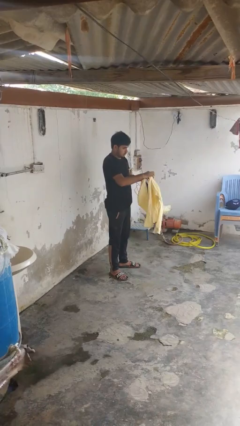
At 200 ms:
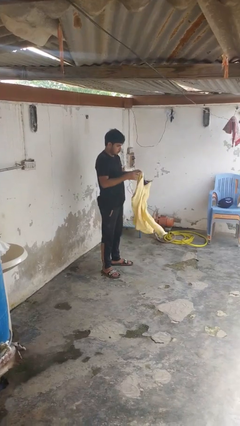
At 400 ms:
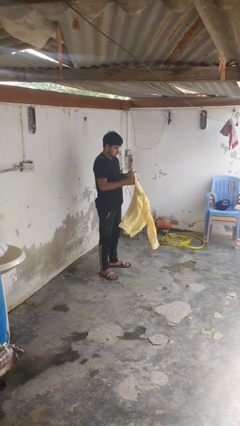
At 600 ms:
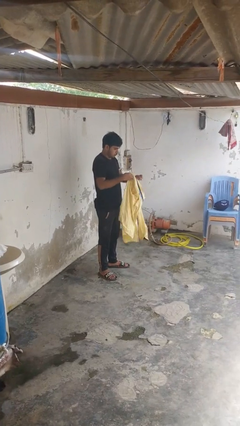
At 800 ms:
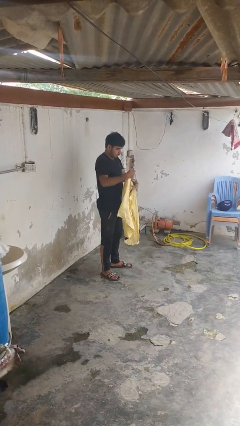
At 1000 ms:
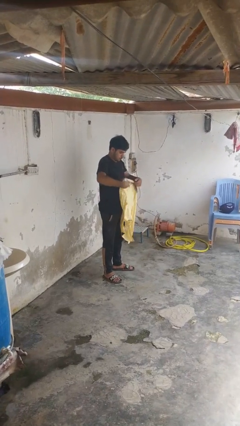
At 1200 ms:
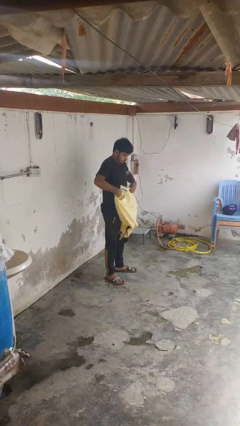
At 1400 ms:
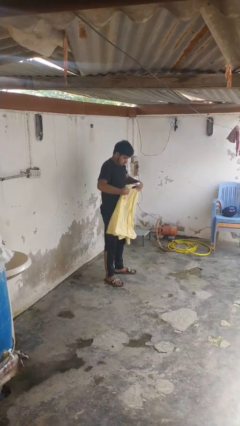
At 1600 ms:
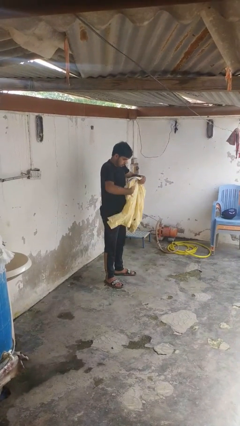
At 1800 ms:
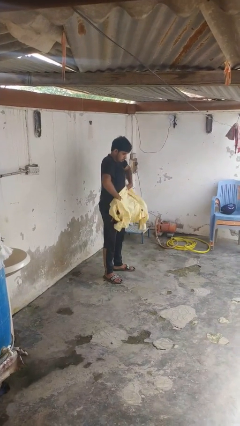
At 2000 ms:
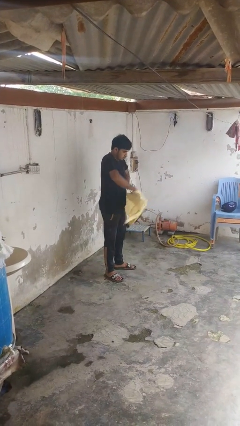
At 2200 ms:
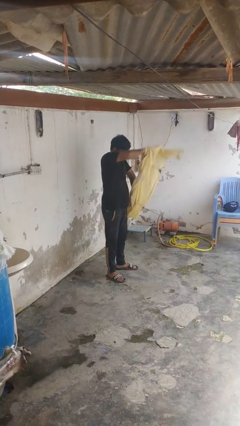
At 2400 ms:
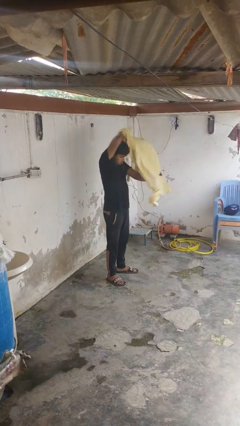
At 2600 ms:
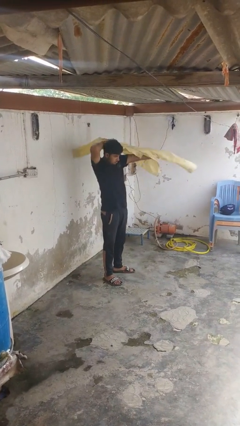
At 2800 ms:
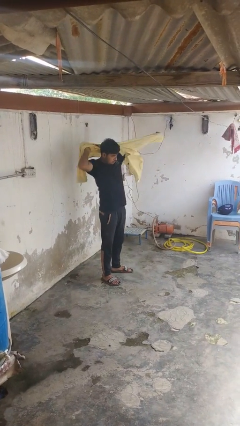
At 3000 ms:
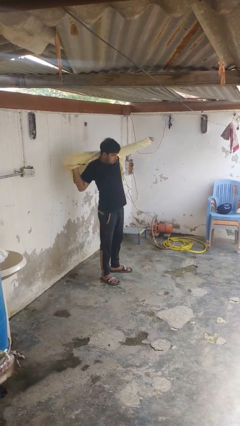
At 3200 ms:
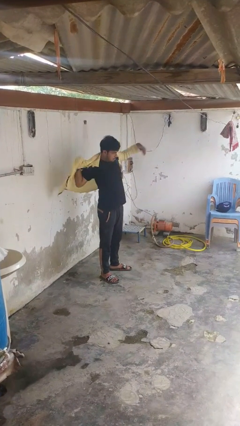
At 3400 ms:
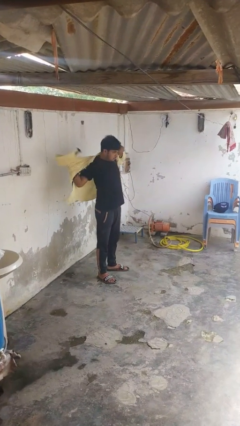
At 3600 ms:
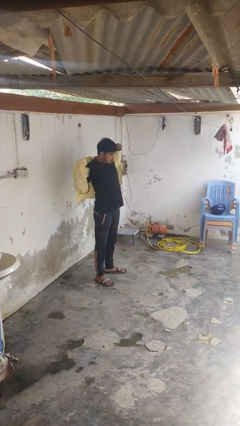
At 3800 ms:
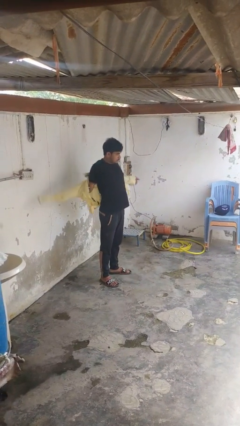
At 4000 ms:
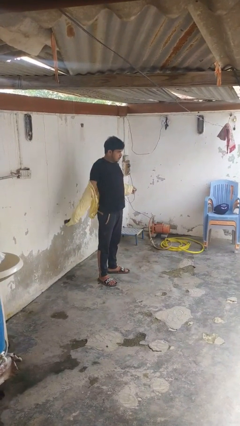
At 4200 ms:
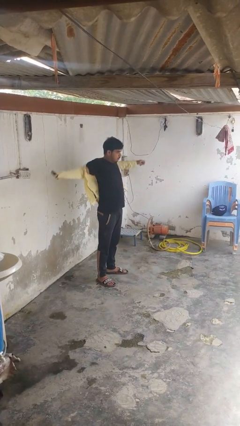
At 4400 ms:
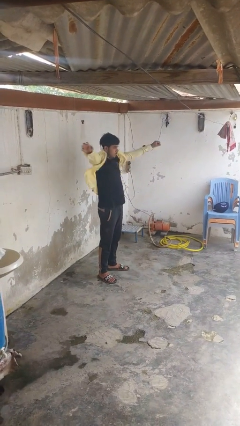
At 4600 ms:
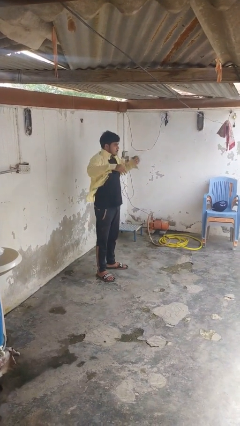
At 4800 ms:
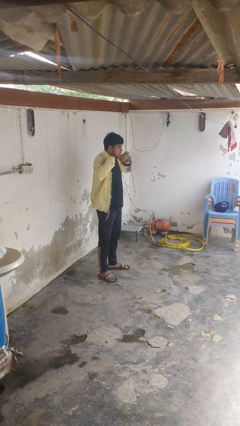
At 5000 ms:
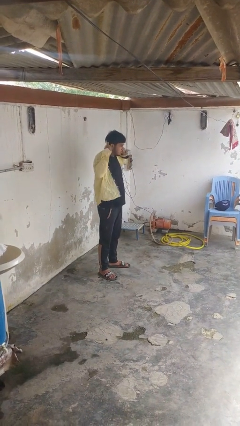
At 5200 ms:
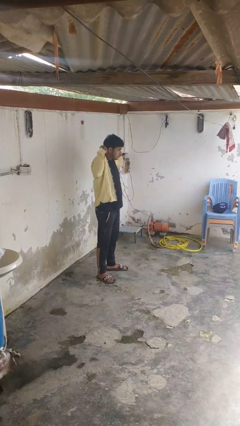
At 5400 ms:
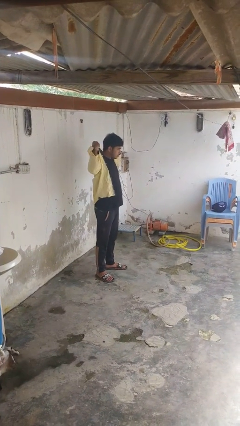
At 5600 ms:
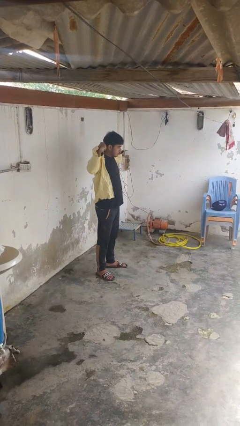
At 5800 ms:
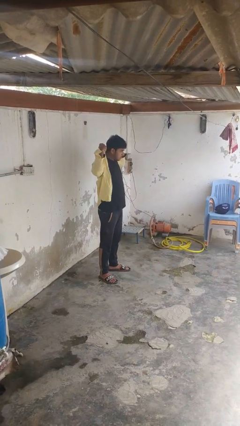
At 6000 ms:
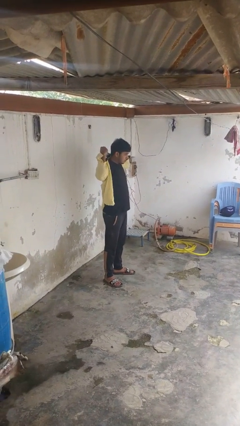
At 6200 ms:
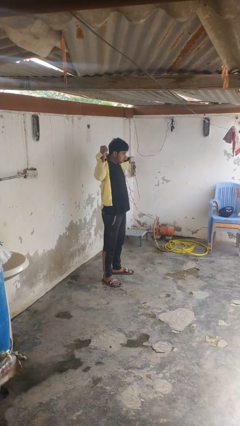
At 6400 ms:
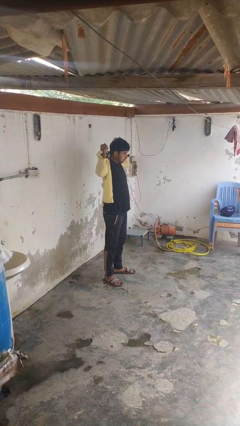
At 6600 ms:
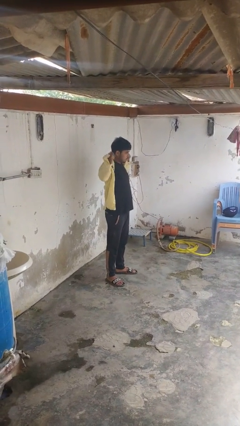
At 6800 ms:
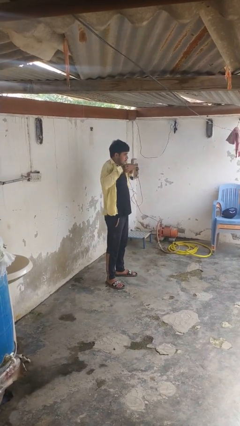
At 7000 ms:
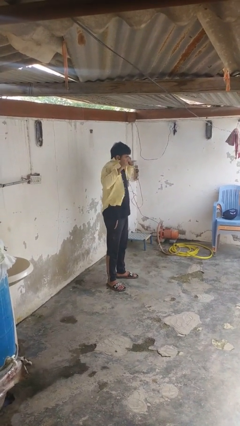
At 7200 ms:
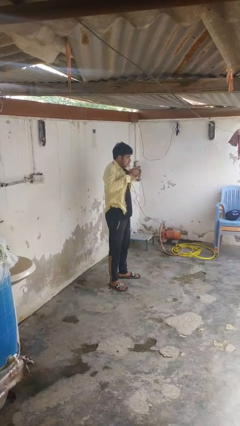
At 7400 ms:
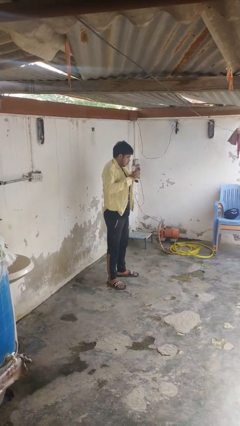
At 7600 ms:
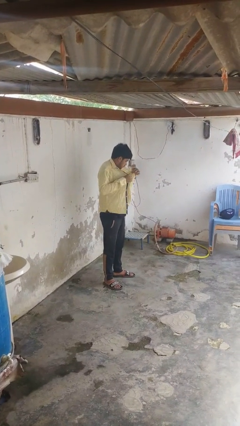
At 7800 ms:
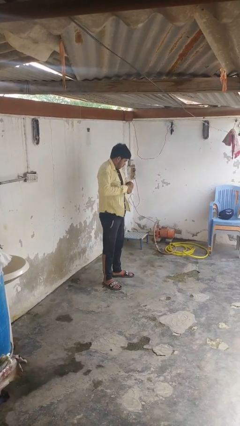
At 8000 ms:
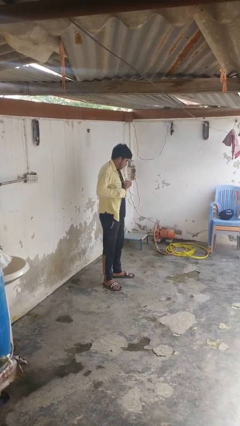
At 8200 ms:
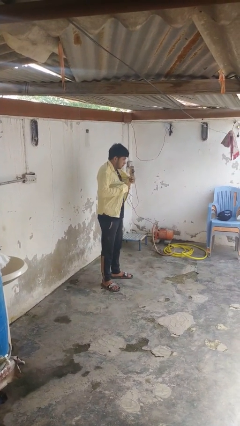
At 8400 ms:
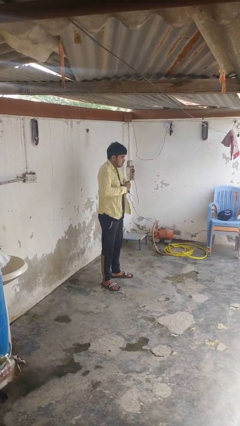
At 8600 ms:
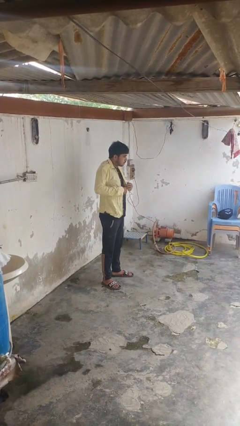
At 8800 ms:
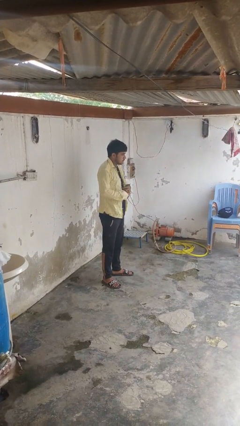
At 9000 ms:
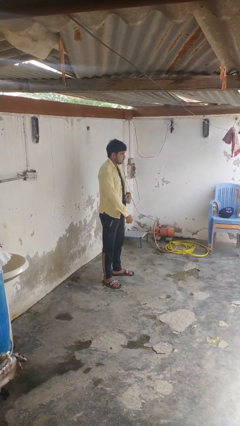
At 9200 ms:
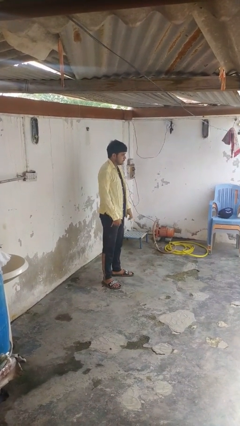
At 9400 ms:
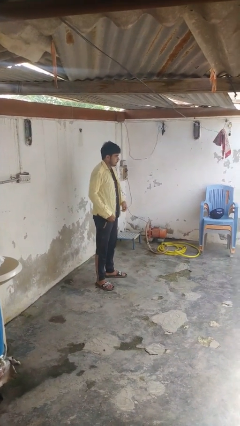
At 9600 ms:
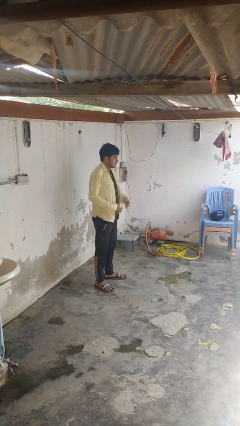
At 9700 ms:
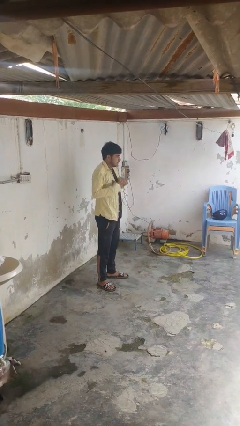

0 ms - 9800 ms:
person puts on shirt

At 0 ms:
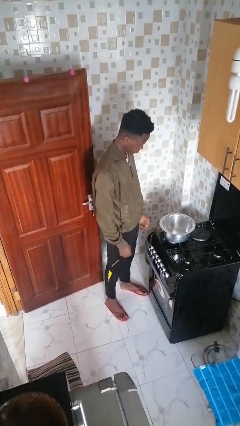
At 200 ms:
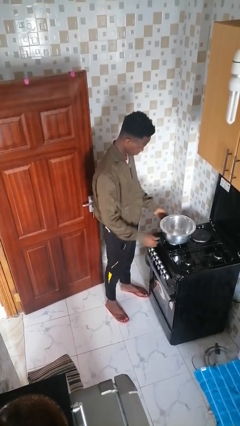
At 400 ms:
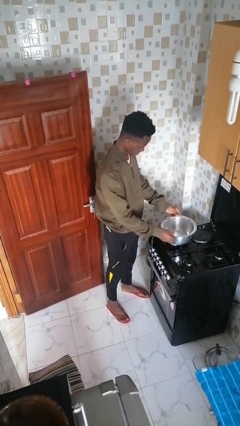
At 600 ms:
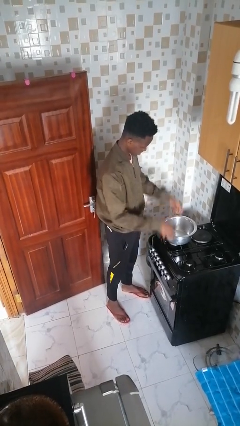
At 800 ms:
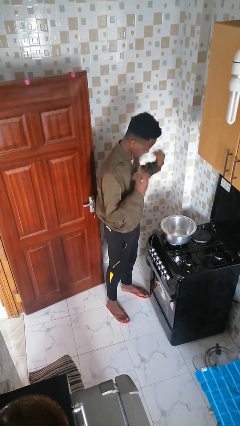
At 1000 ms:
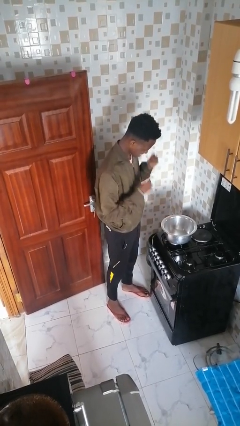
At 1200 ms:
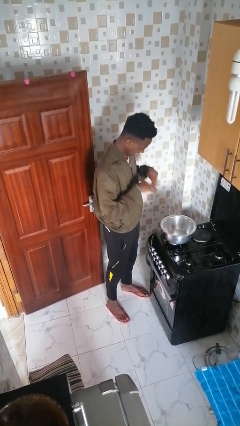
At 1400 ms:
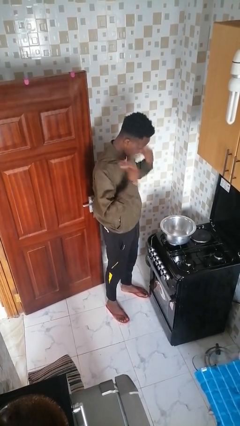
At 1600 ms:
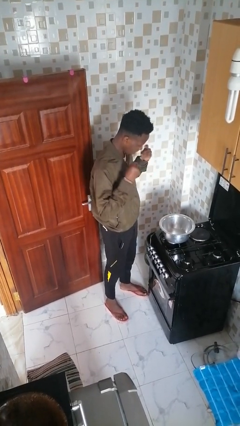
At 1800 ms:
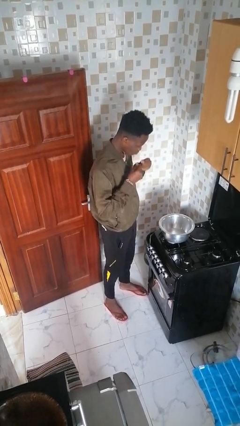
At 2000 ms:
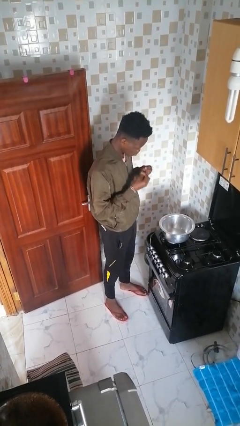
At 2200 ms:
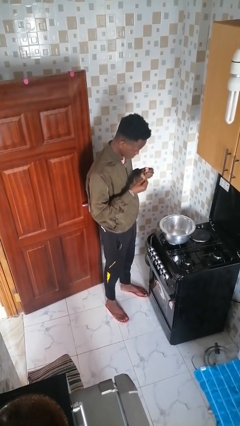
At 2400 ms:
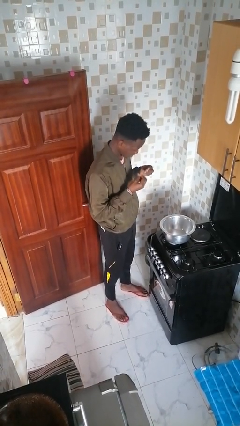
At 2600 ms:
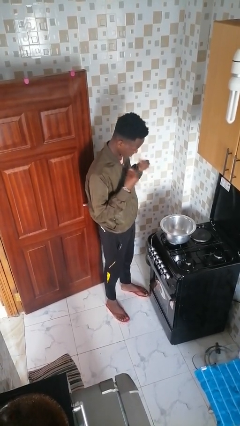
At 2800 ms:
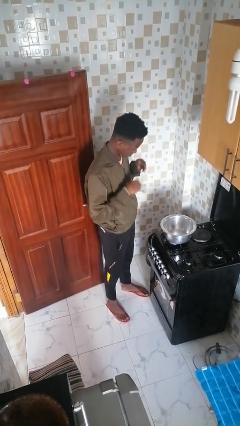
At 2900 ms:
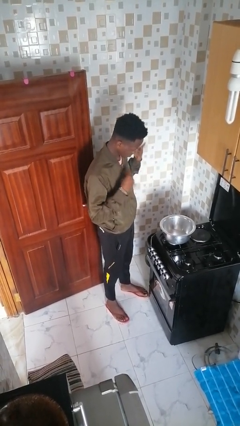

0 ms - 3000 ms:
person burns hand

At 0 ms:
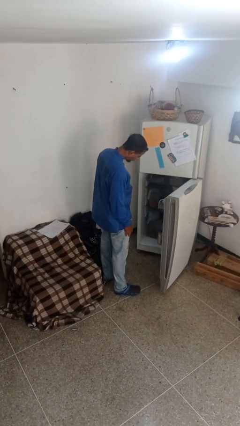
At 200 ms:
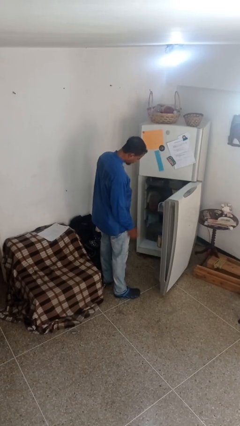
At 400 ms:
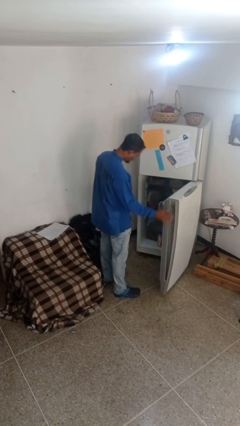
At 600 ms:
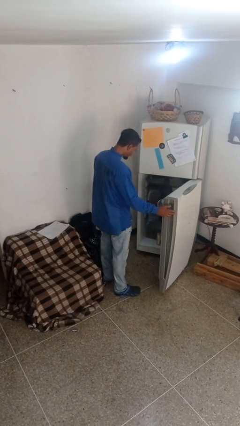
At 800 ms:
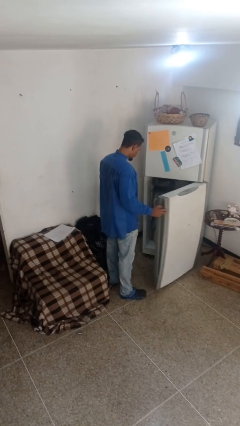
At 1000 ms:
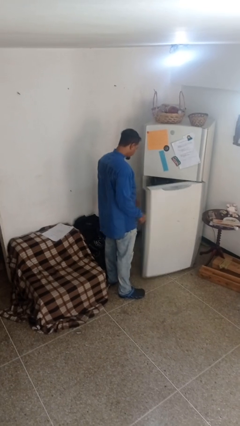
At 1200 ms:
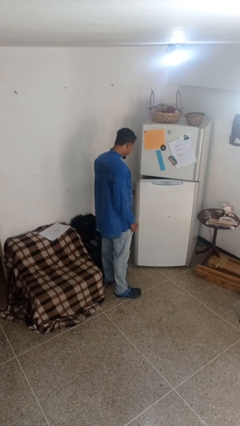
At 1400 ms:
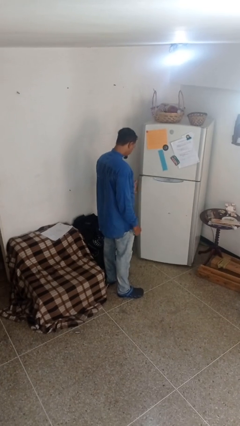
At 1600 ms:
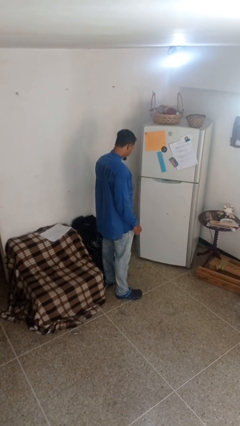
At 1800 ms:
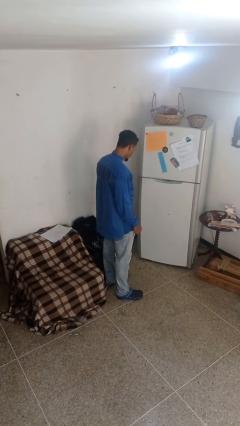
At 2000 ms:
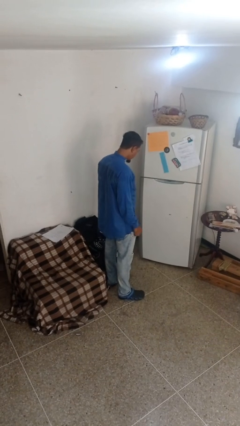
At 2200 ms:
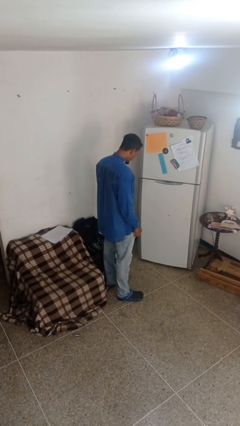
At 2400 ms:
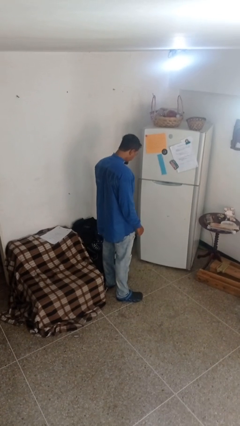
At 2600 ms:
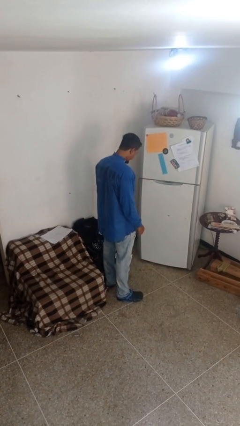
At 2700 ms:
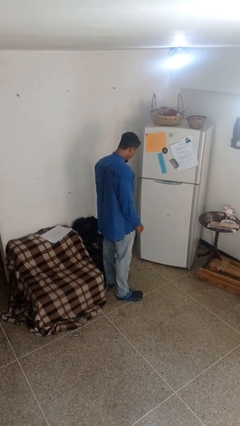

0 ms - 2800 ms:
person closes refrigerator

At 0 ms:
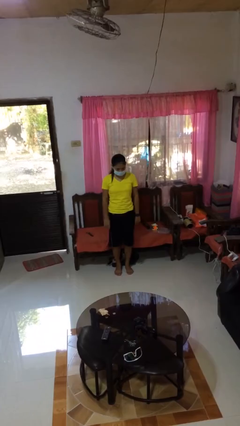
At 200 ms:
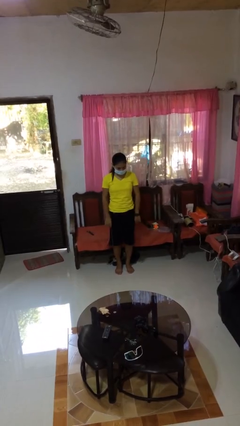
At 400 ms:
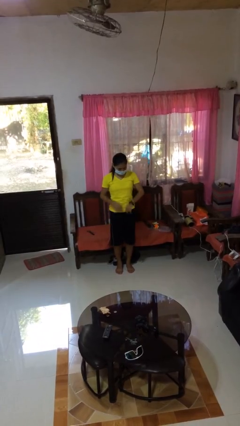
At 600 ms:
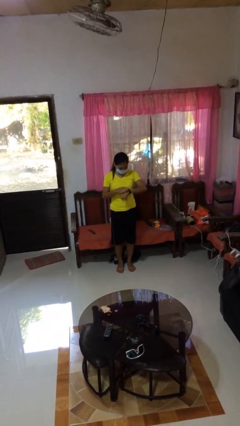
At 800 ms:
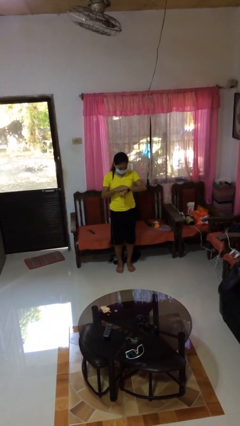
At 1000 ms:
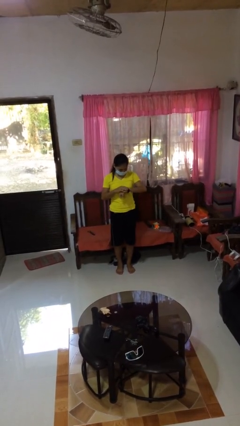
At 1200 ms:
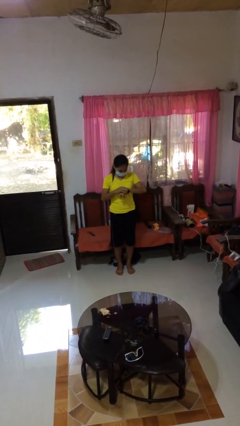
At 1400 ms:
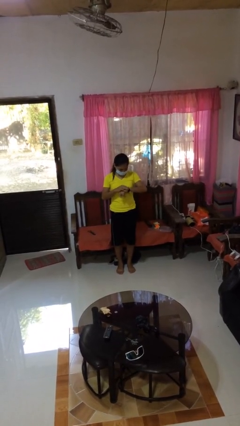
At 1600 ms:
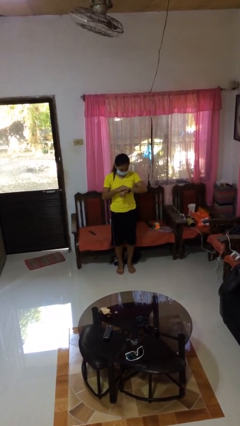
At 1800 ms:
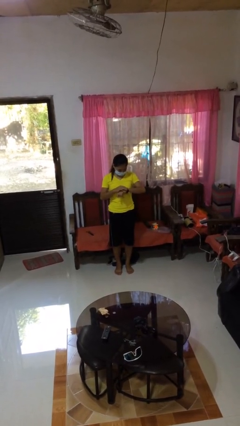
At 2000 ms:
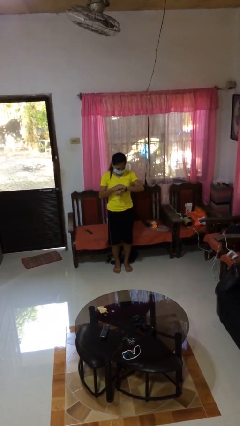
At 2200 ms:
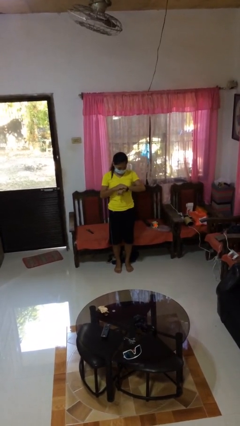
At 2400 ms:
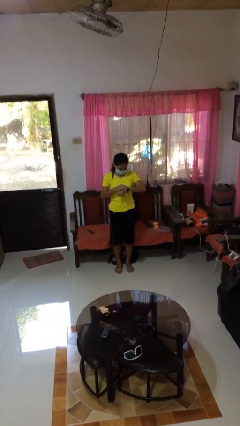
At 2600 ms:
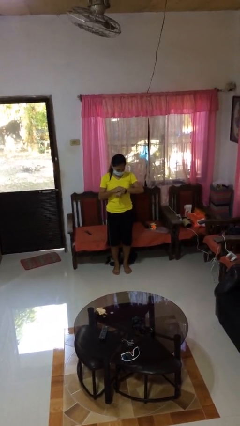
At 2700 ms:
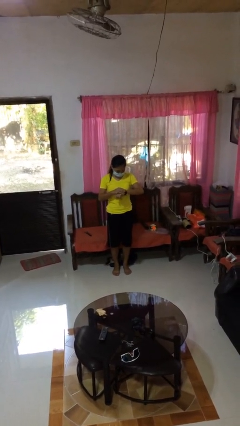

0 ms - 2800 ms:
person looks at wristwatch
